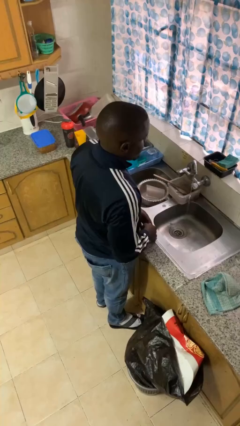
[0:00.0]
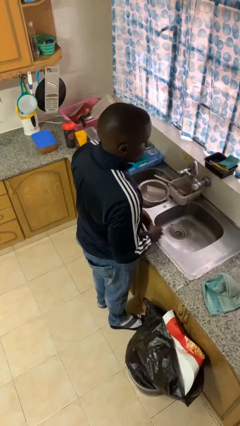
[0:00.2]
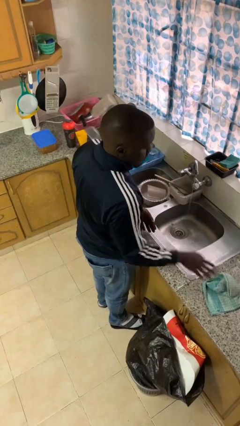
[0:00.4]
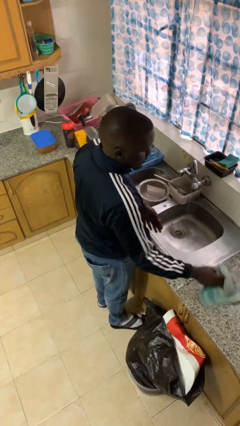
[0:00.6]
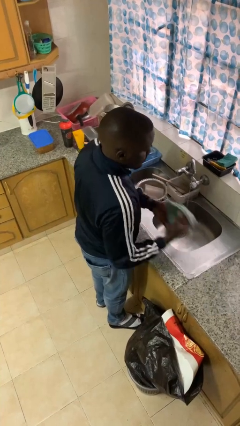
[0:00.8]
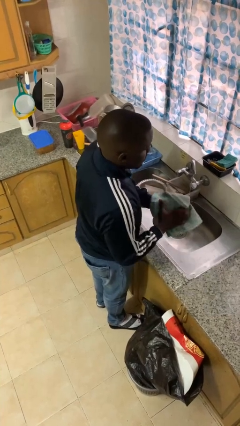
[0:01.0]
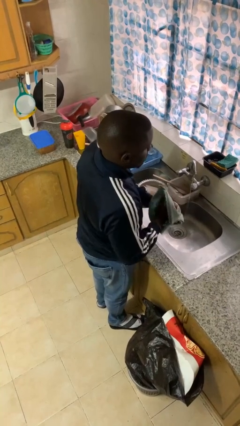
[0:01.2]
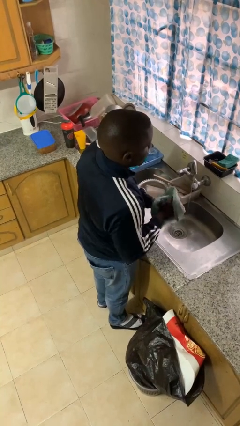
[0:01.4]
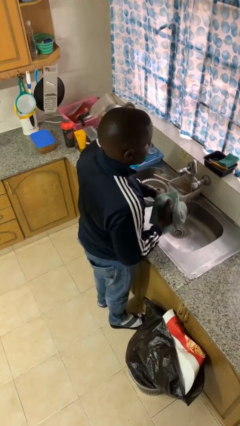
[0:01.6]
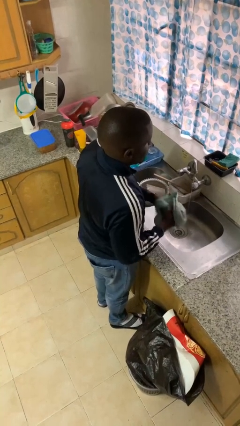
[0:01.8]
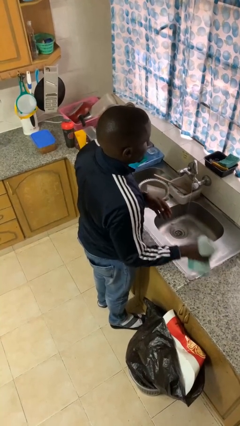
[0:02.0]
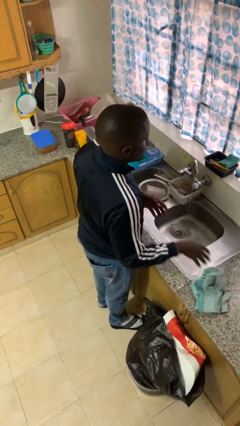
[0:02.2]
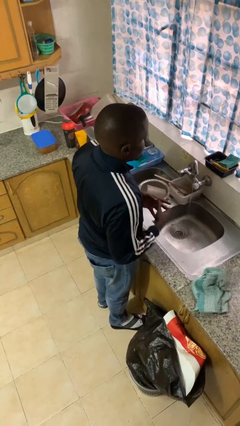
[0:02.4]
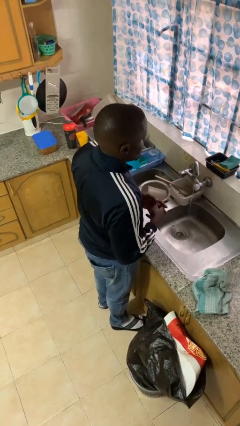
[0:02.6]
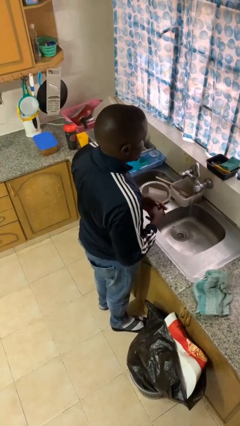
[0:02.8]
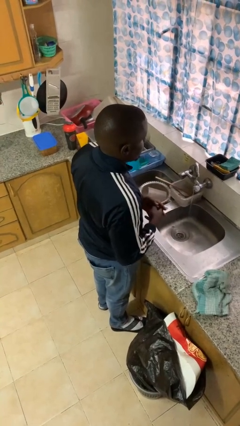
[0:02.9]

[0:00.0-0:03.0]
person dries hands with towel

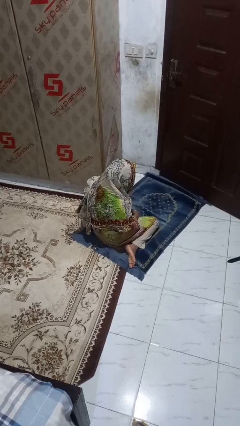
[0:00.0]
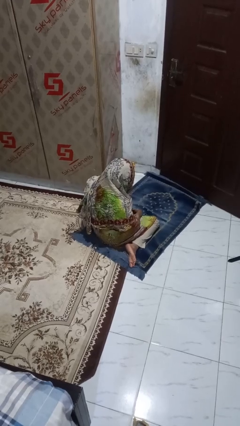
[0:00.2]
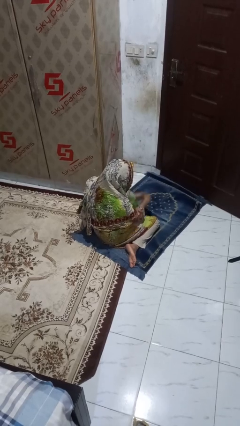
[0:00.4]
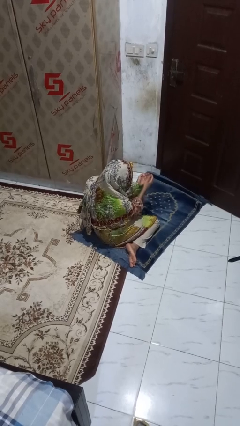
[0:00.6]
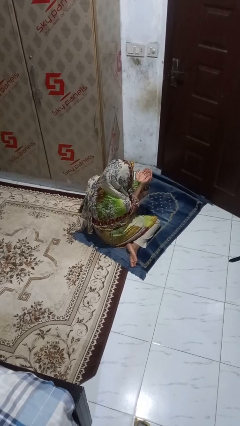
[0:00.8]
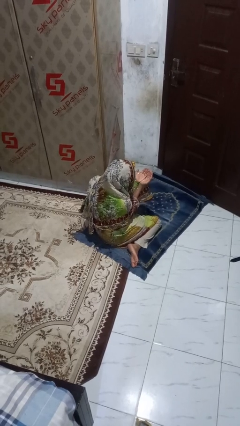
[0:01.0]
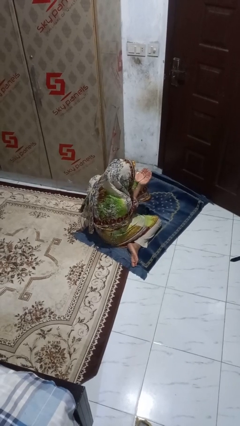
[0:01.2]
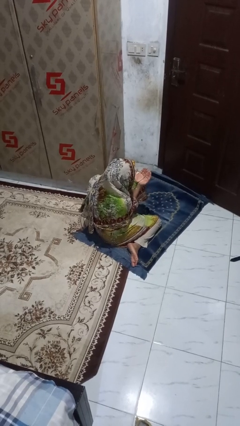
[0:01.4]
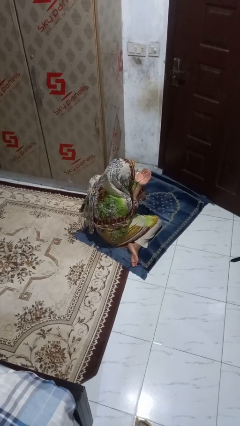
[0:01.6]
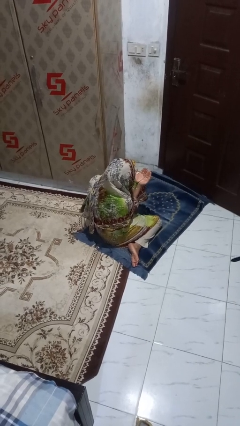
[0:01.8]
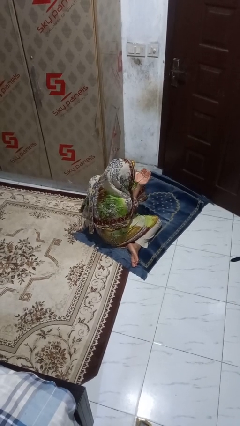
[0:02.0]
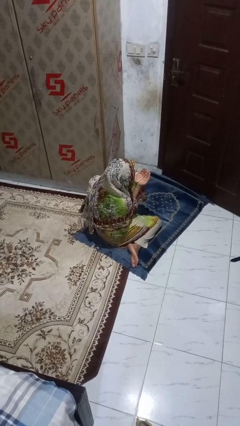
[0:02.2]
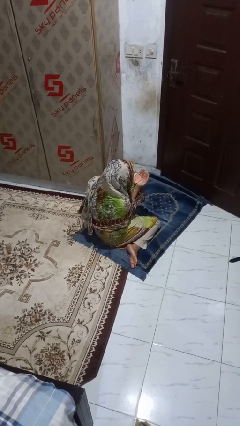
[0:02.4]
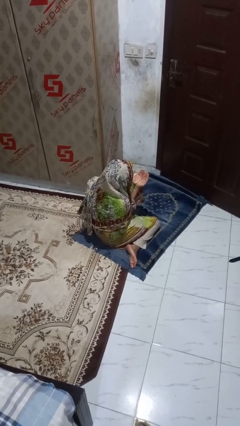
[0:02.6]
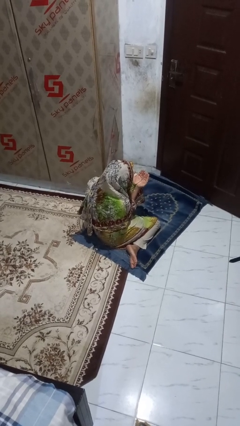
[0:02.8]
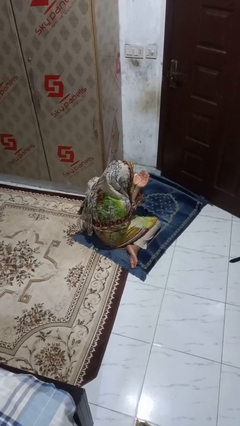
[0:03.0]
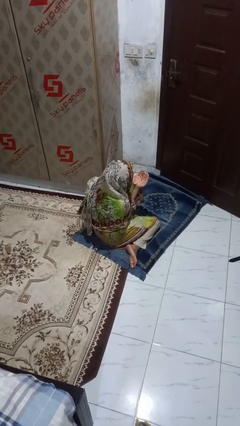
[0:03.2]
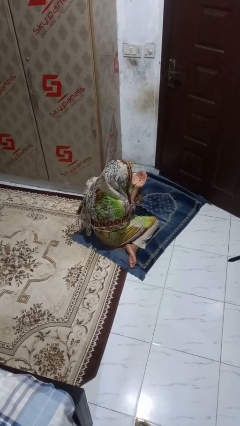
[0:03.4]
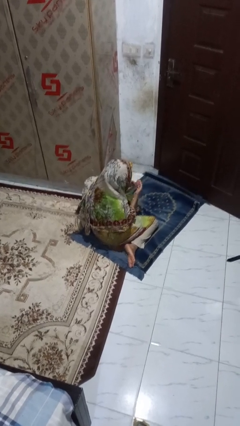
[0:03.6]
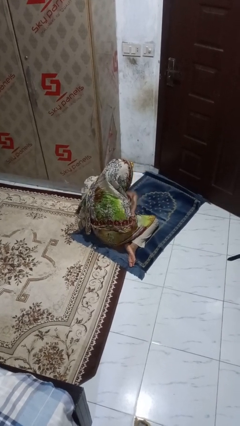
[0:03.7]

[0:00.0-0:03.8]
person prays

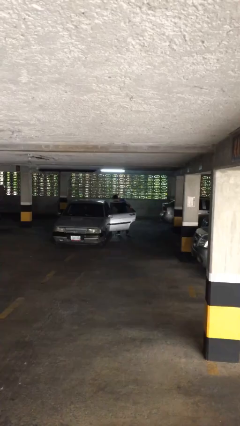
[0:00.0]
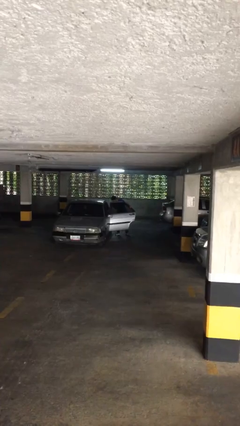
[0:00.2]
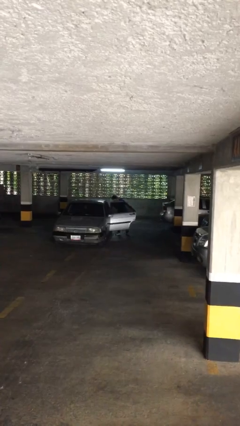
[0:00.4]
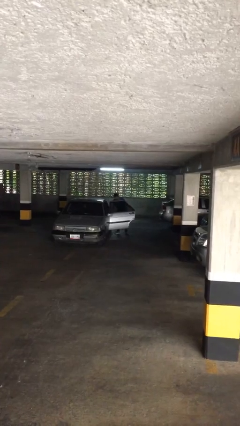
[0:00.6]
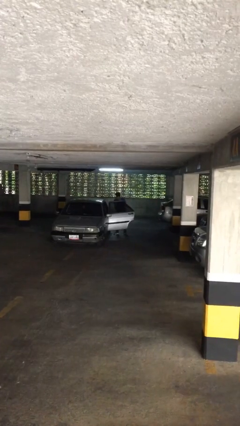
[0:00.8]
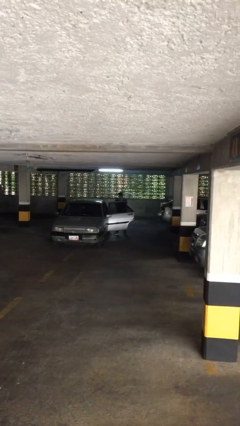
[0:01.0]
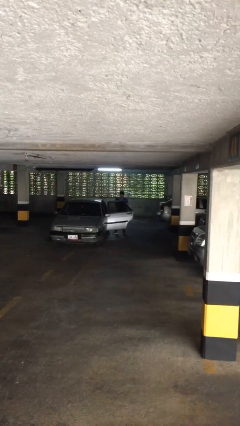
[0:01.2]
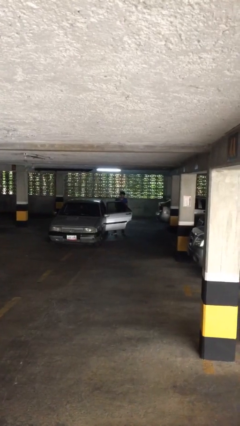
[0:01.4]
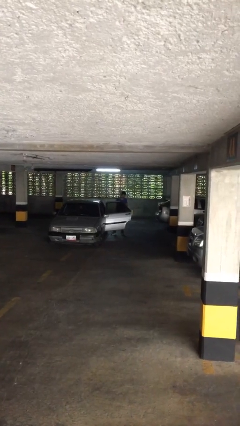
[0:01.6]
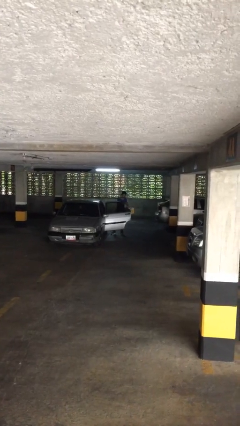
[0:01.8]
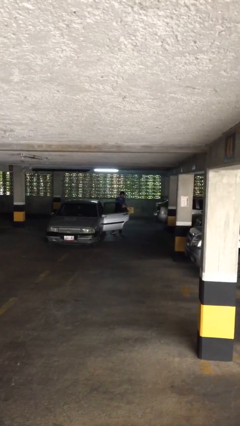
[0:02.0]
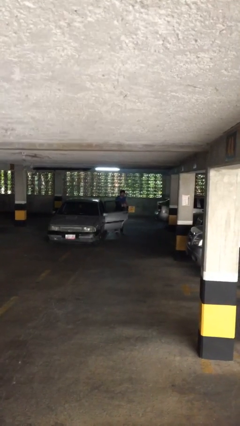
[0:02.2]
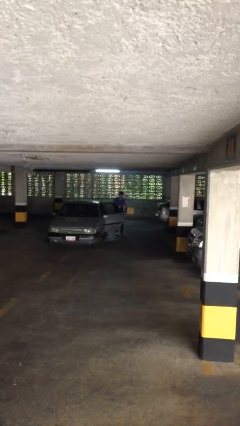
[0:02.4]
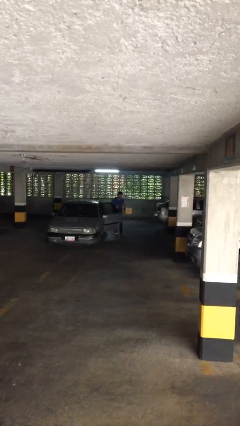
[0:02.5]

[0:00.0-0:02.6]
person unloads car

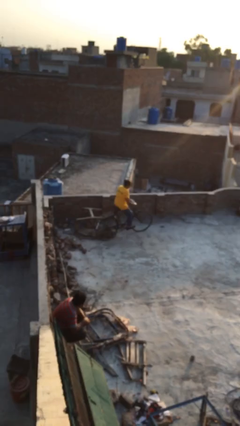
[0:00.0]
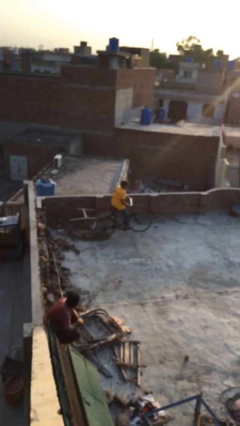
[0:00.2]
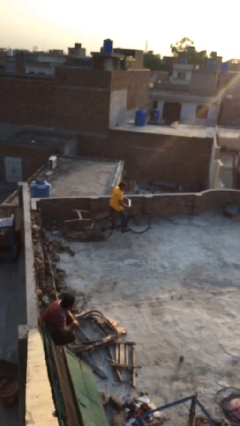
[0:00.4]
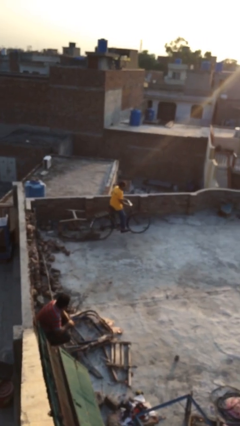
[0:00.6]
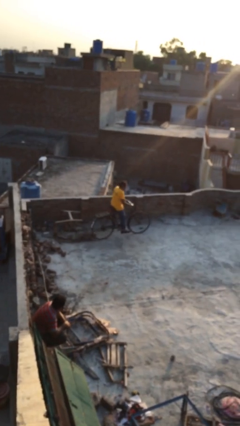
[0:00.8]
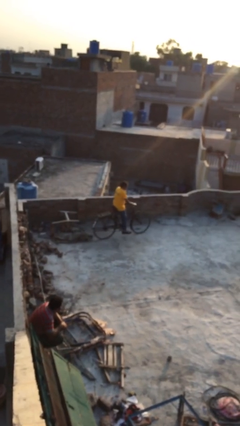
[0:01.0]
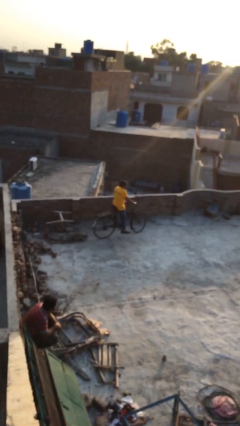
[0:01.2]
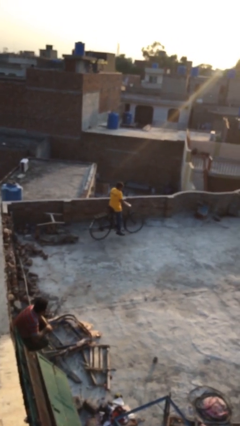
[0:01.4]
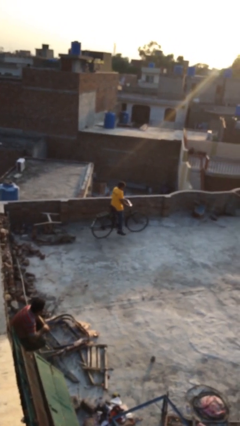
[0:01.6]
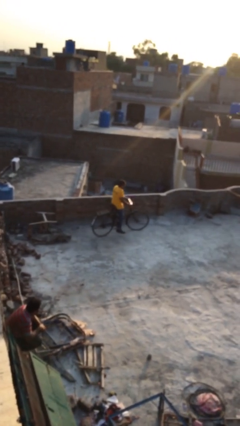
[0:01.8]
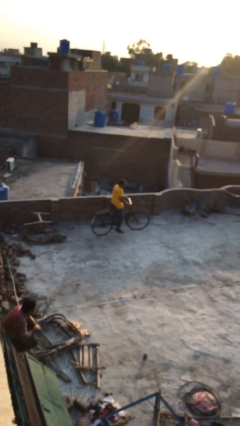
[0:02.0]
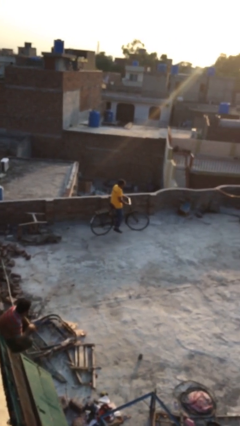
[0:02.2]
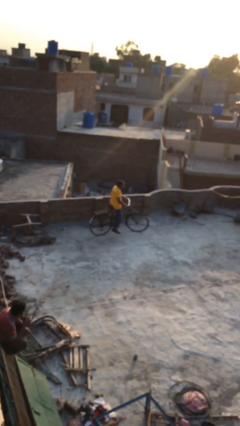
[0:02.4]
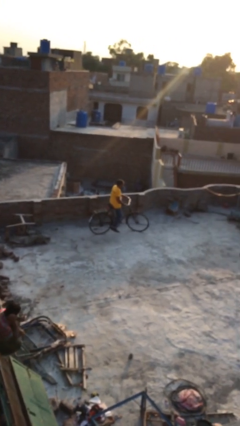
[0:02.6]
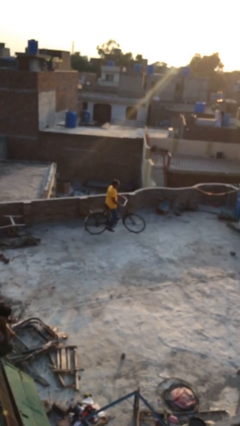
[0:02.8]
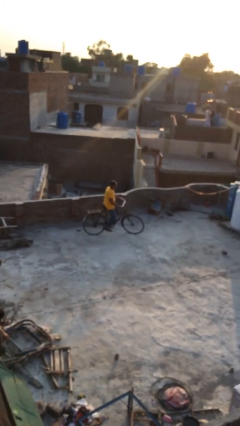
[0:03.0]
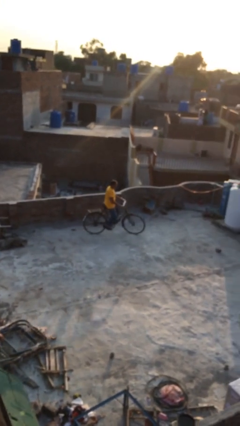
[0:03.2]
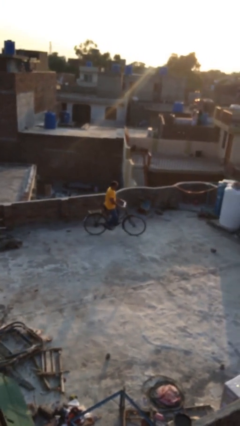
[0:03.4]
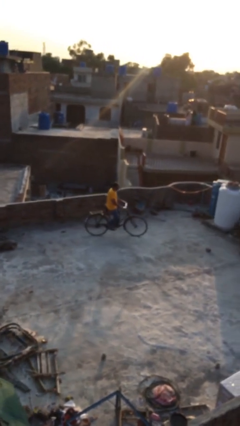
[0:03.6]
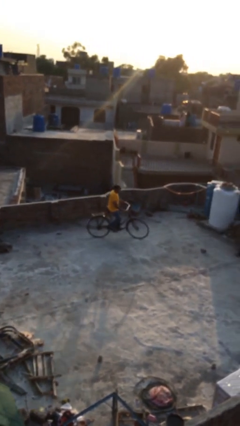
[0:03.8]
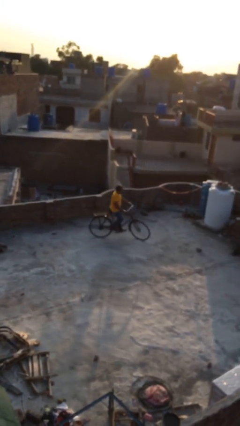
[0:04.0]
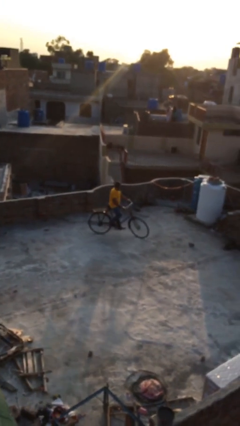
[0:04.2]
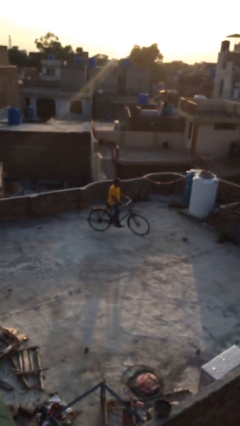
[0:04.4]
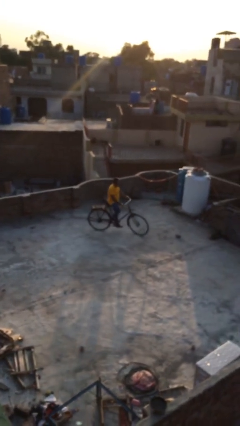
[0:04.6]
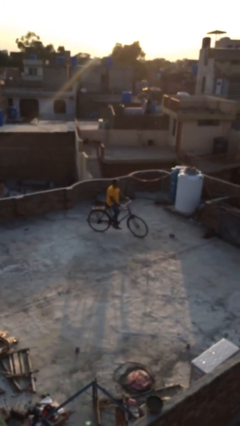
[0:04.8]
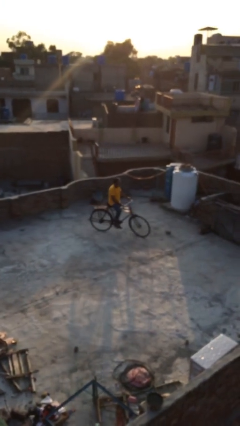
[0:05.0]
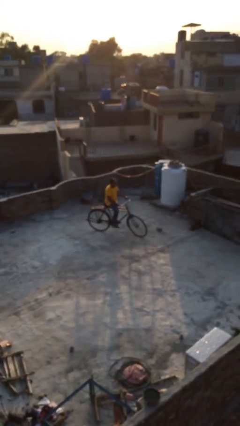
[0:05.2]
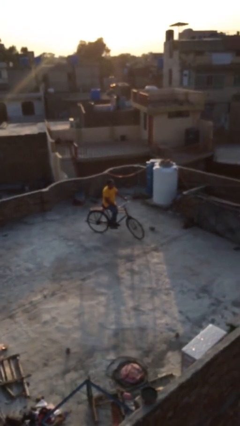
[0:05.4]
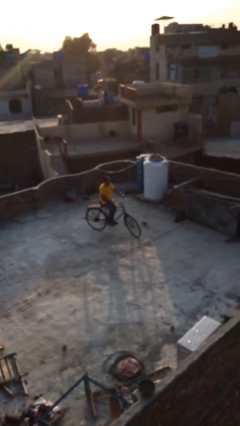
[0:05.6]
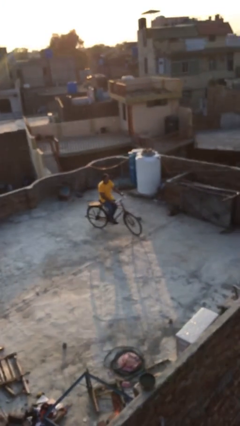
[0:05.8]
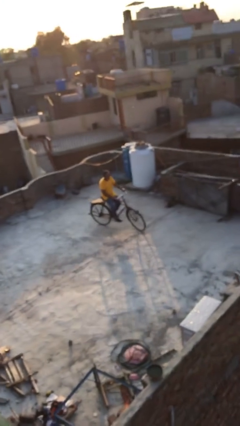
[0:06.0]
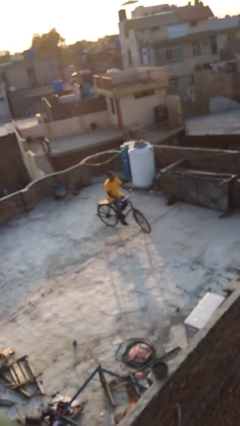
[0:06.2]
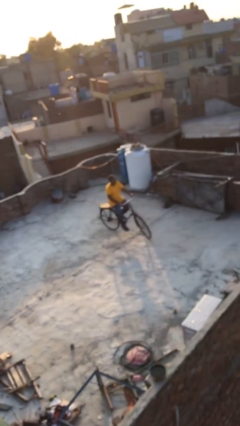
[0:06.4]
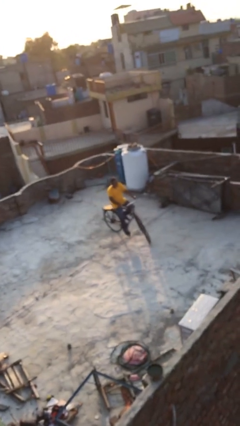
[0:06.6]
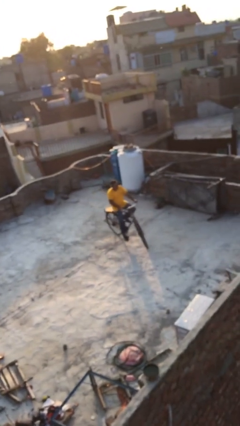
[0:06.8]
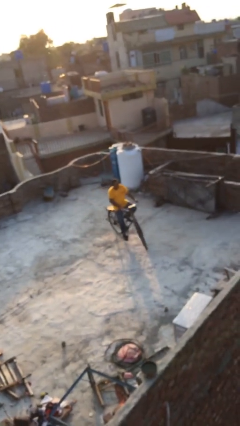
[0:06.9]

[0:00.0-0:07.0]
person rides bicycle

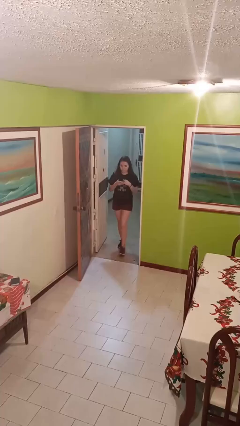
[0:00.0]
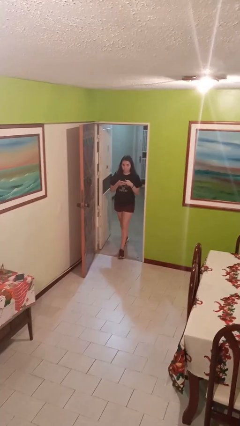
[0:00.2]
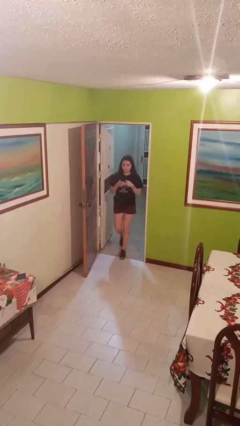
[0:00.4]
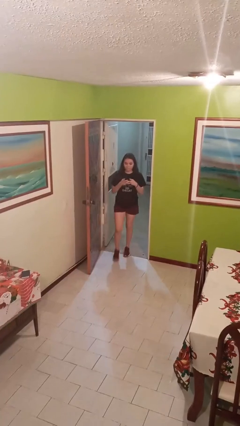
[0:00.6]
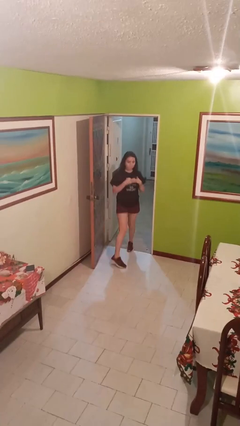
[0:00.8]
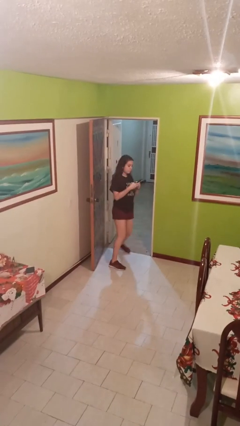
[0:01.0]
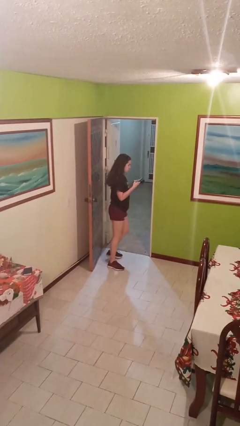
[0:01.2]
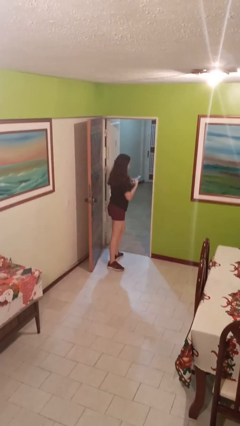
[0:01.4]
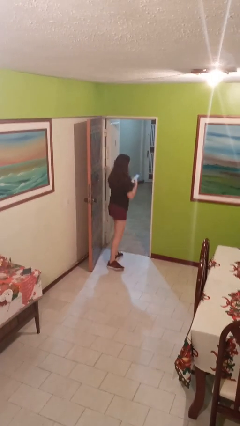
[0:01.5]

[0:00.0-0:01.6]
person enters scene through structure
